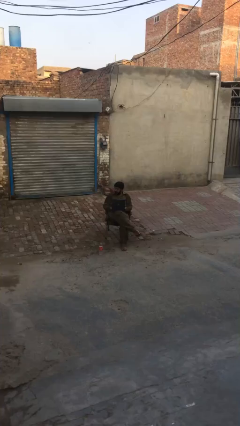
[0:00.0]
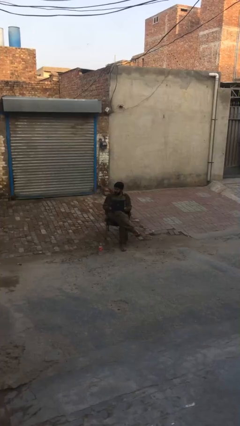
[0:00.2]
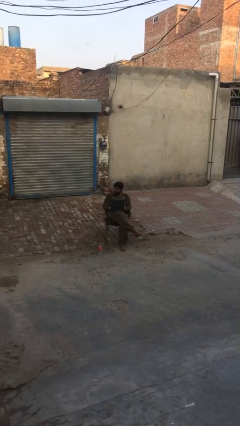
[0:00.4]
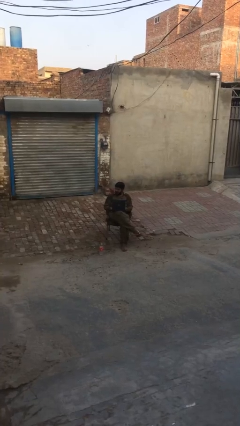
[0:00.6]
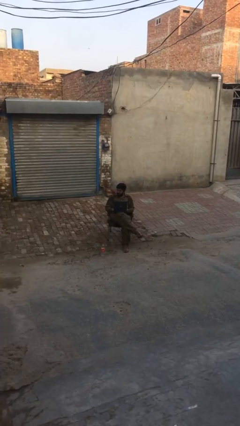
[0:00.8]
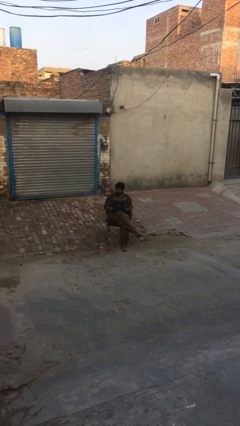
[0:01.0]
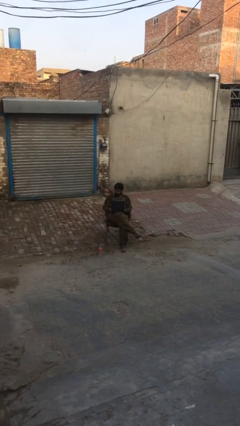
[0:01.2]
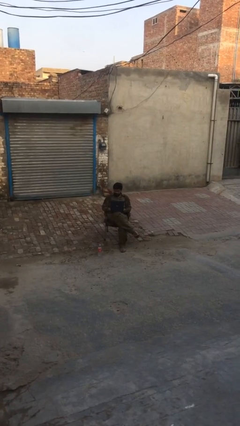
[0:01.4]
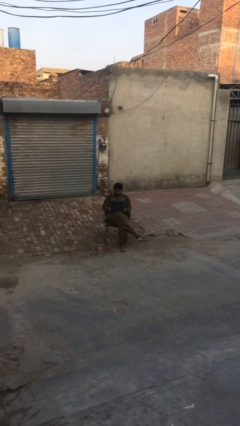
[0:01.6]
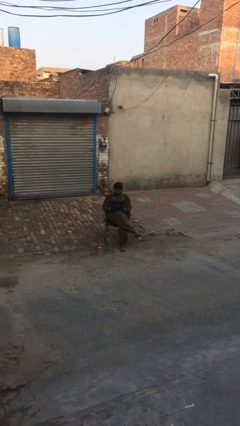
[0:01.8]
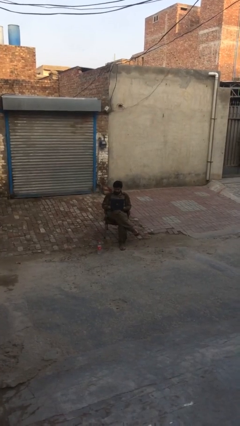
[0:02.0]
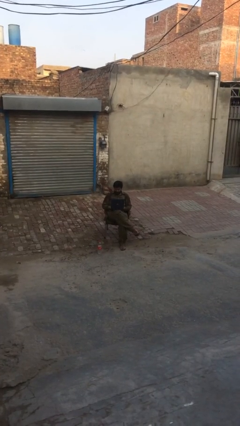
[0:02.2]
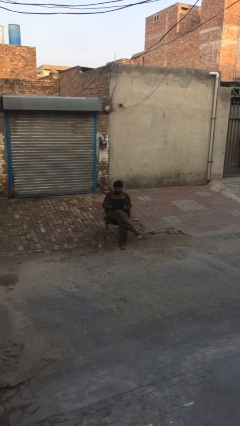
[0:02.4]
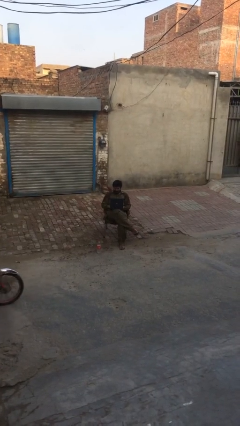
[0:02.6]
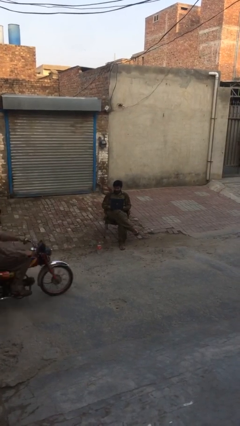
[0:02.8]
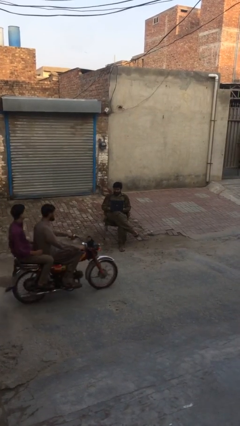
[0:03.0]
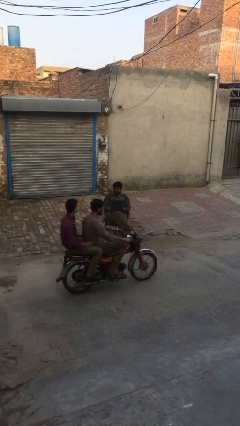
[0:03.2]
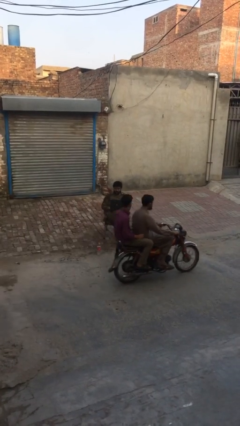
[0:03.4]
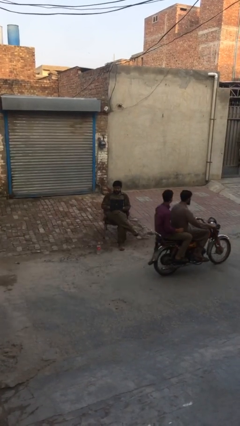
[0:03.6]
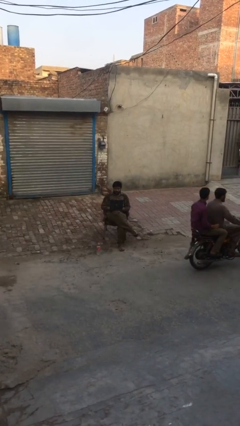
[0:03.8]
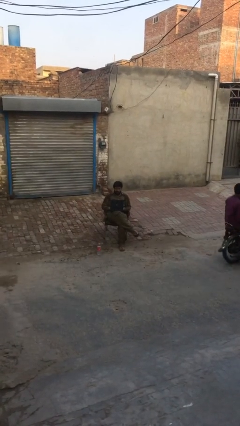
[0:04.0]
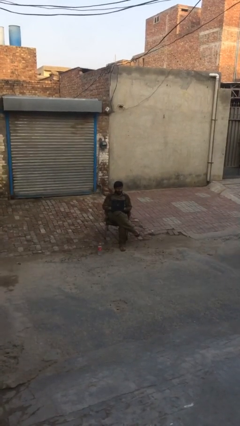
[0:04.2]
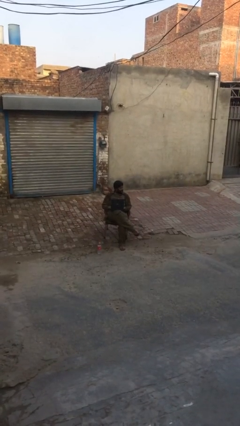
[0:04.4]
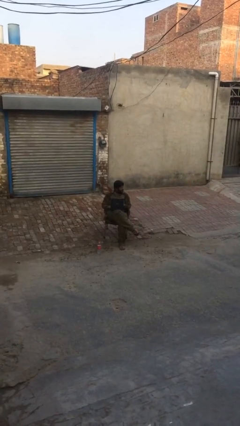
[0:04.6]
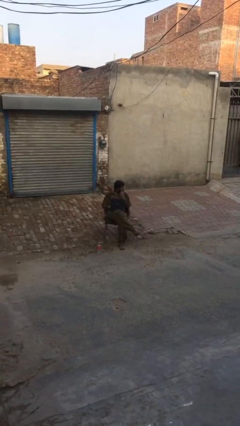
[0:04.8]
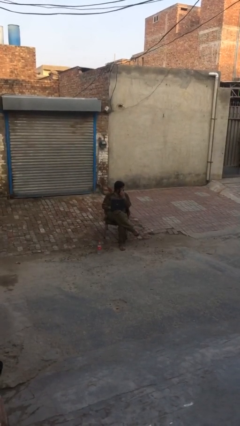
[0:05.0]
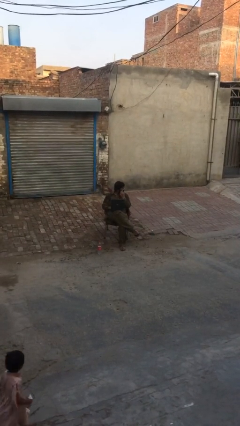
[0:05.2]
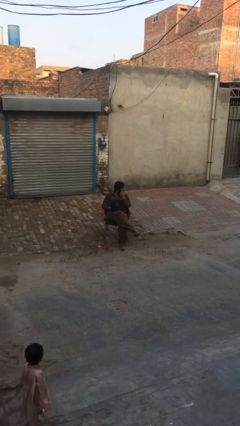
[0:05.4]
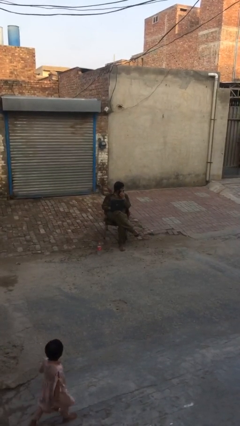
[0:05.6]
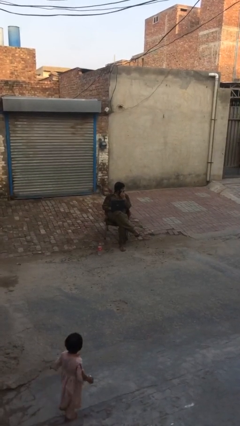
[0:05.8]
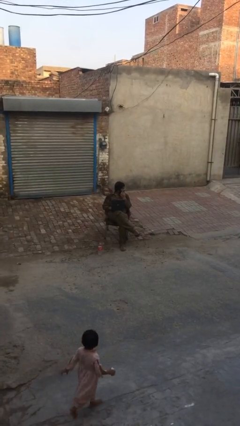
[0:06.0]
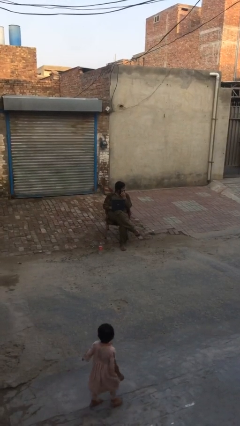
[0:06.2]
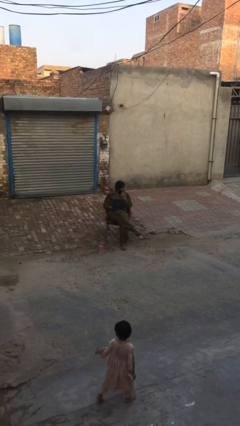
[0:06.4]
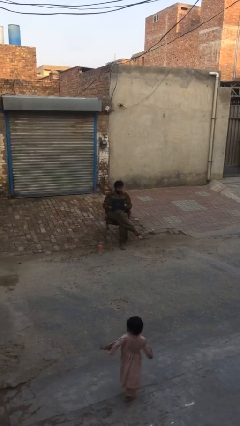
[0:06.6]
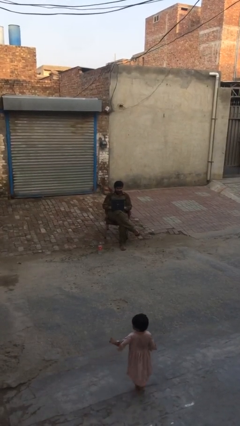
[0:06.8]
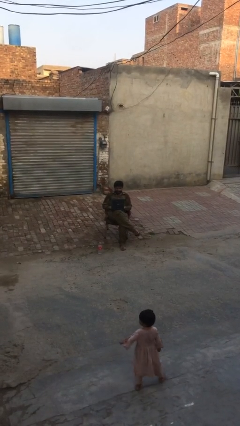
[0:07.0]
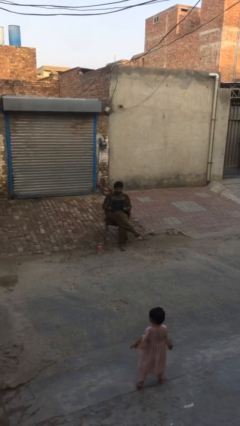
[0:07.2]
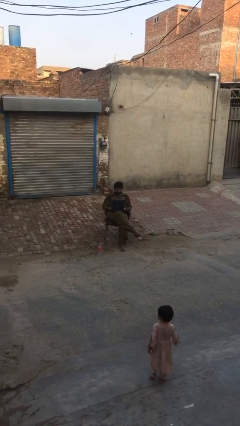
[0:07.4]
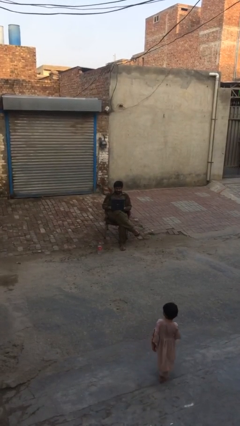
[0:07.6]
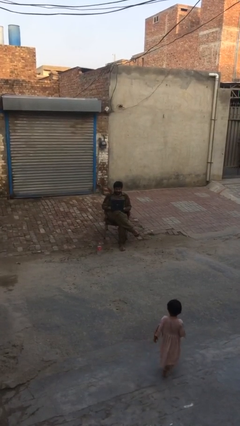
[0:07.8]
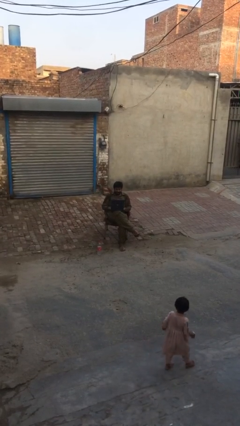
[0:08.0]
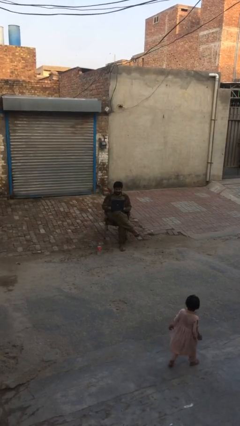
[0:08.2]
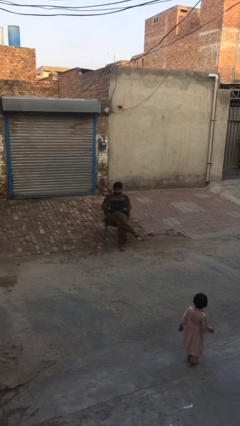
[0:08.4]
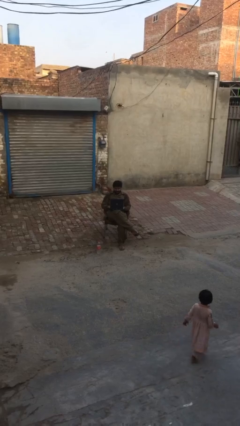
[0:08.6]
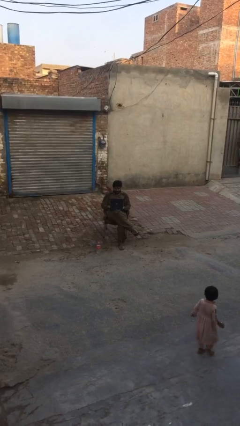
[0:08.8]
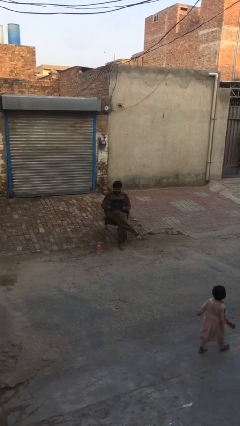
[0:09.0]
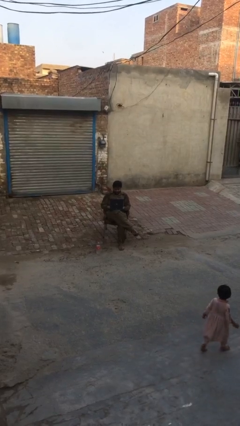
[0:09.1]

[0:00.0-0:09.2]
person interacts with laptop

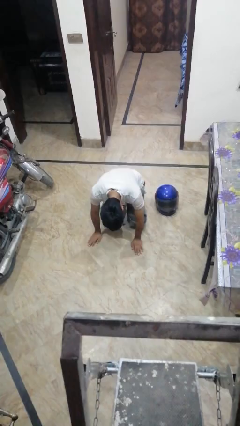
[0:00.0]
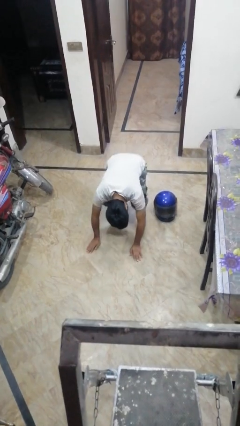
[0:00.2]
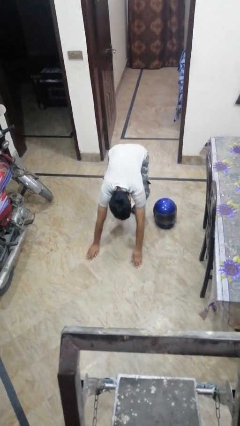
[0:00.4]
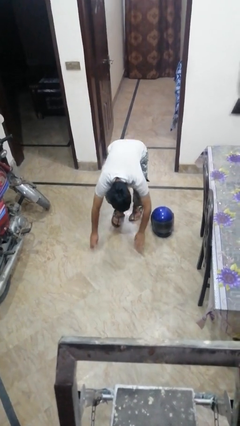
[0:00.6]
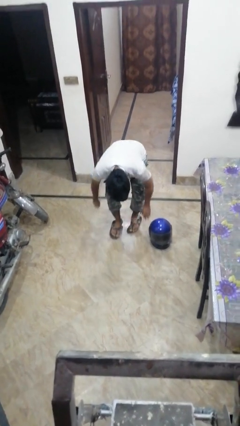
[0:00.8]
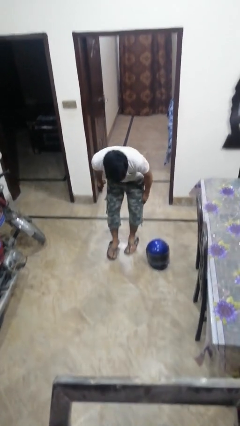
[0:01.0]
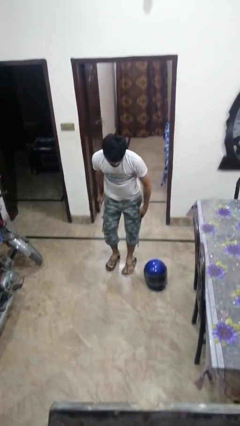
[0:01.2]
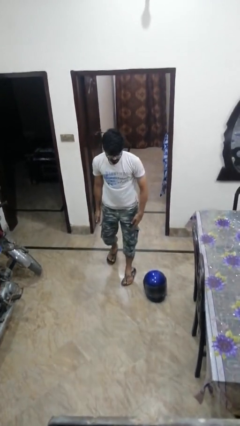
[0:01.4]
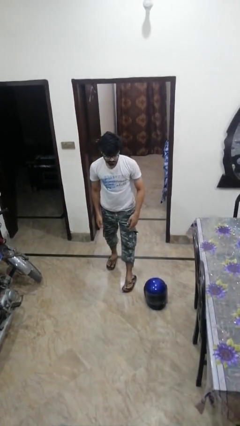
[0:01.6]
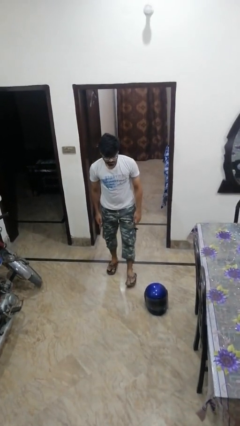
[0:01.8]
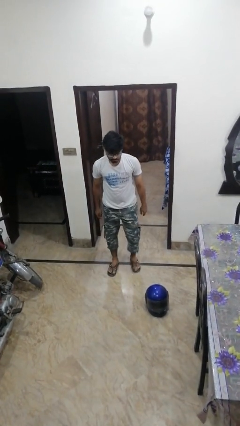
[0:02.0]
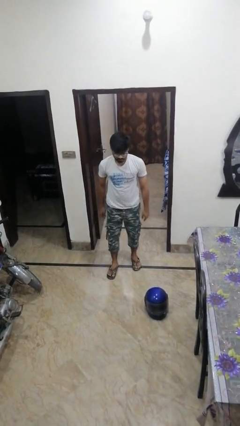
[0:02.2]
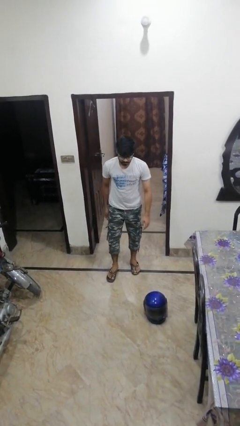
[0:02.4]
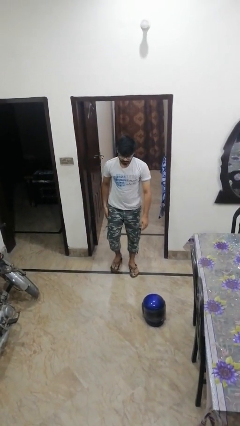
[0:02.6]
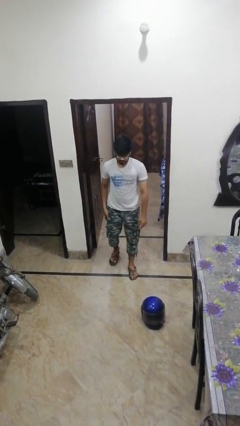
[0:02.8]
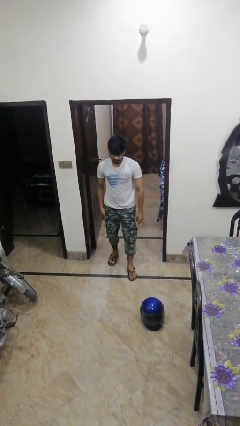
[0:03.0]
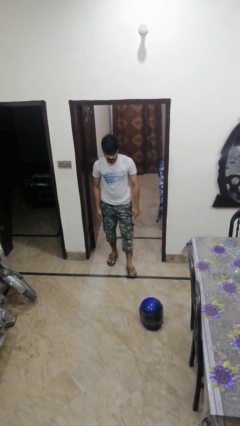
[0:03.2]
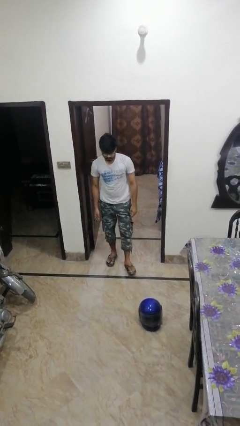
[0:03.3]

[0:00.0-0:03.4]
person stands up from floor

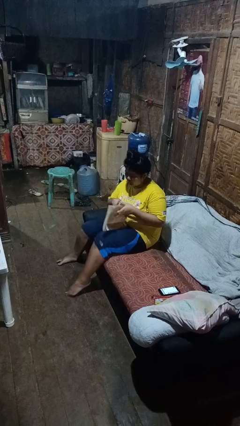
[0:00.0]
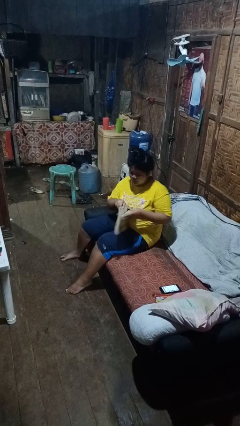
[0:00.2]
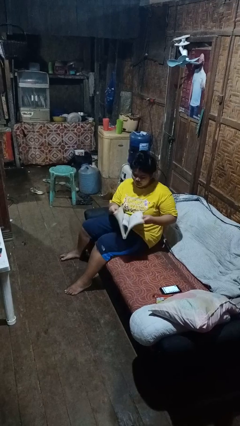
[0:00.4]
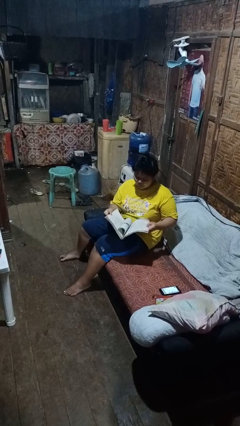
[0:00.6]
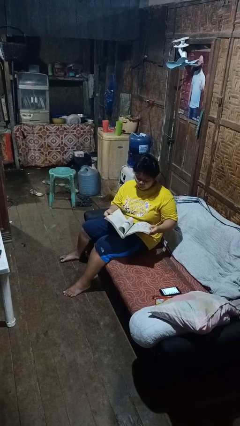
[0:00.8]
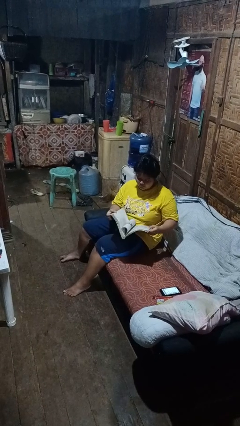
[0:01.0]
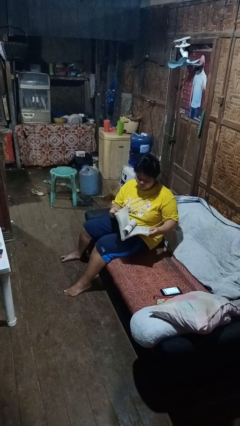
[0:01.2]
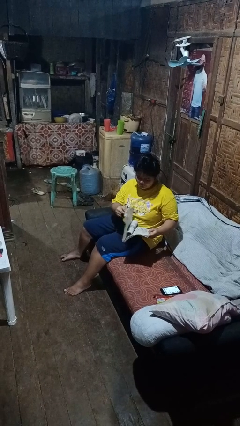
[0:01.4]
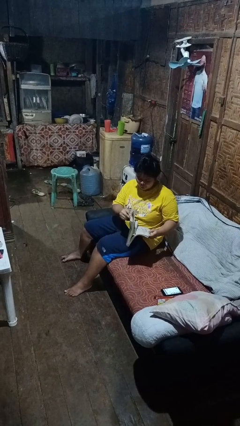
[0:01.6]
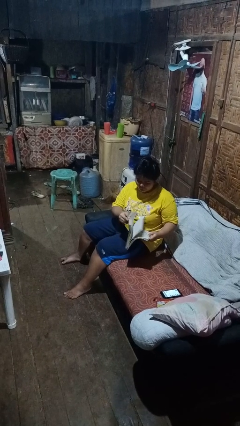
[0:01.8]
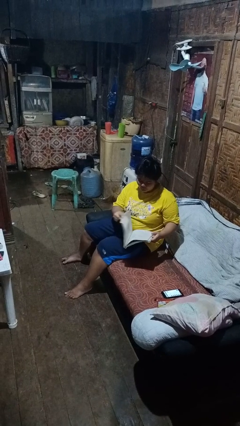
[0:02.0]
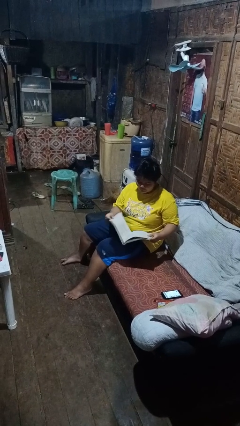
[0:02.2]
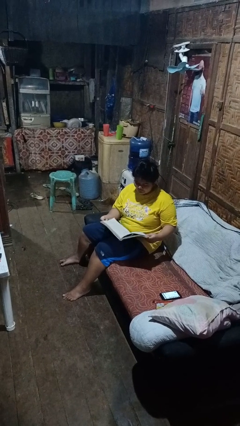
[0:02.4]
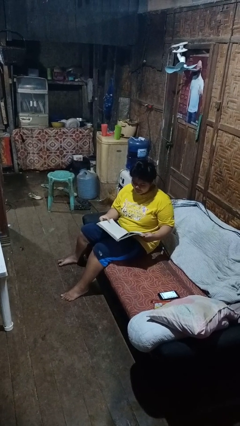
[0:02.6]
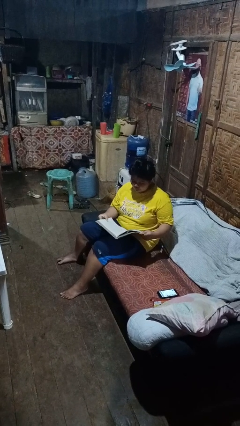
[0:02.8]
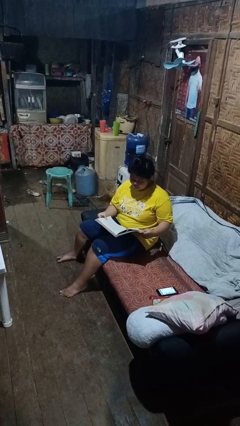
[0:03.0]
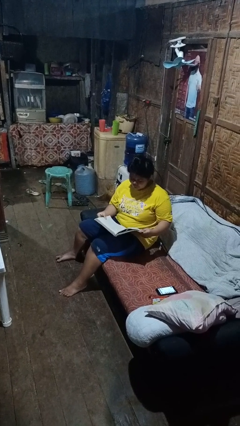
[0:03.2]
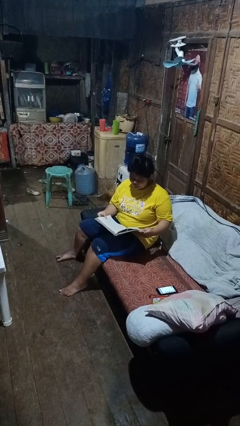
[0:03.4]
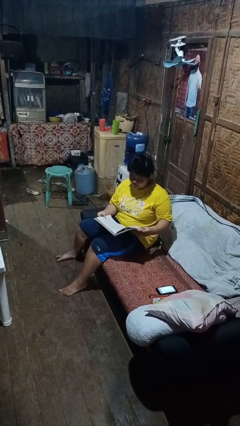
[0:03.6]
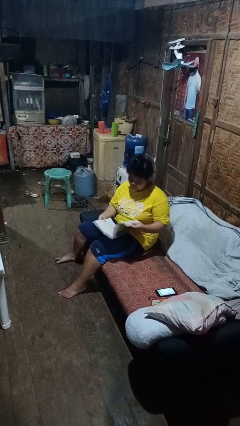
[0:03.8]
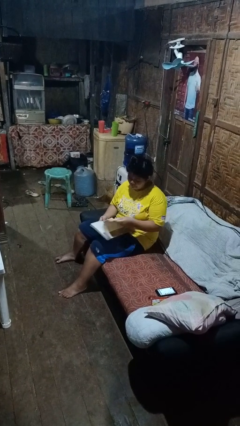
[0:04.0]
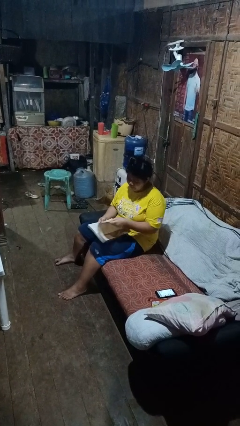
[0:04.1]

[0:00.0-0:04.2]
person reads book

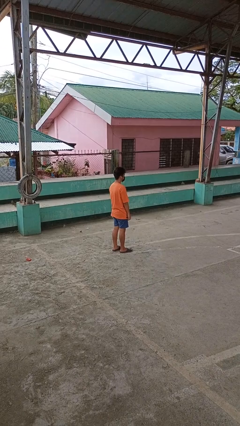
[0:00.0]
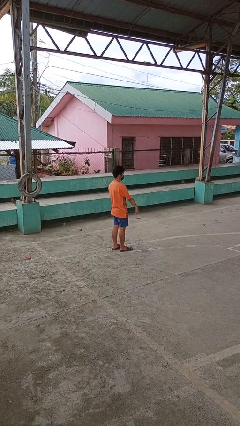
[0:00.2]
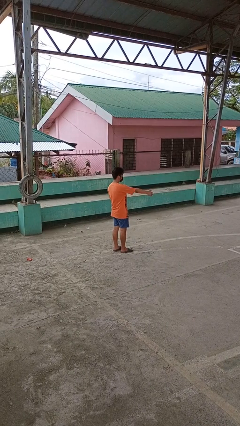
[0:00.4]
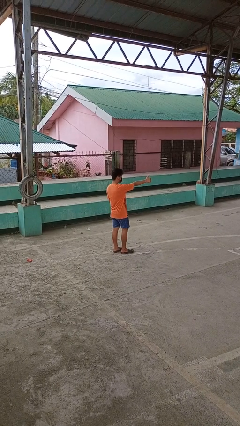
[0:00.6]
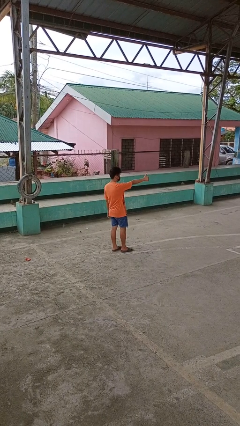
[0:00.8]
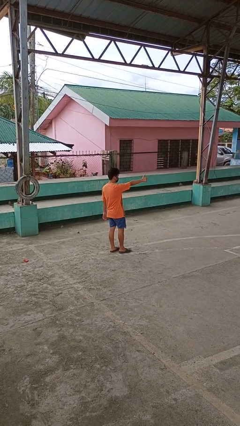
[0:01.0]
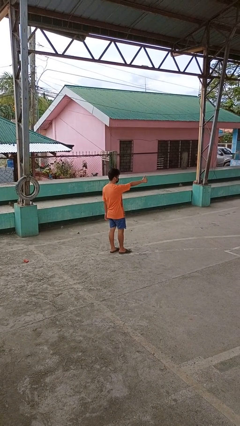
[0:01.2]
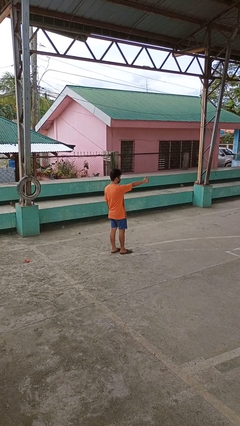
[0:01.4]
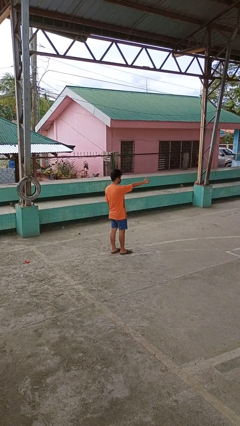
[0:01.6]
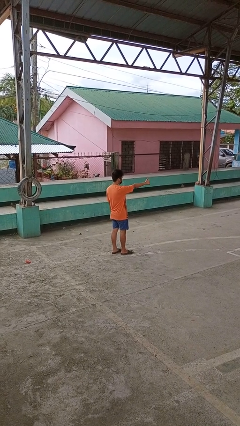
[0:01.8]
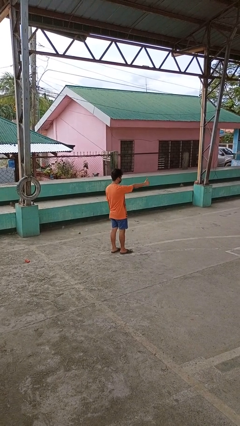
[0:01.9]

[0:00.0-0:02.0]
person gestures thumbs up
